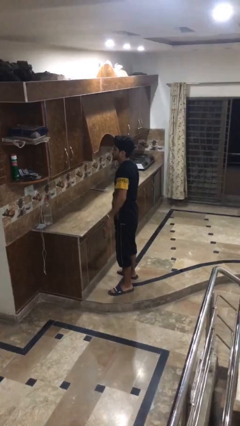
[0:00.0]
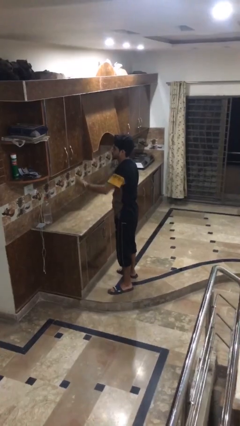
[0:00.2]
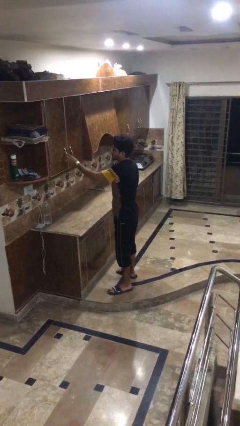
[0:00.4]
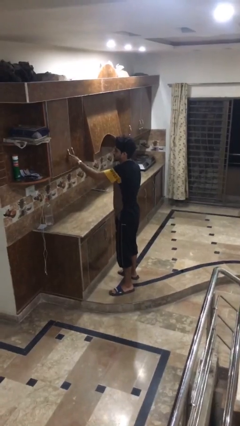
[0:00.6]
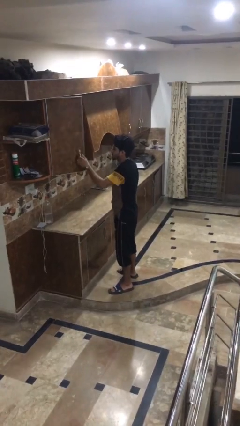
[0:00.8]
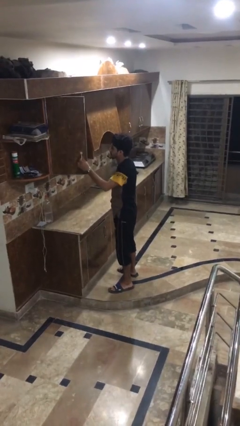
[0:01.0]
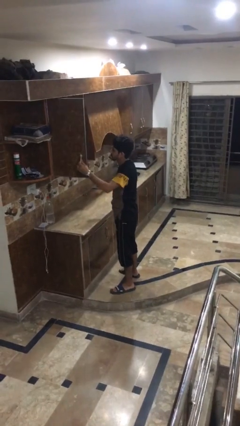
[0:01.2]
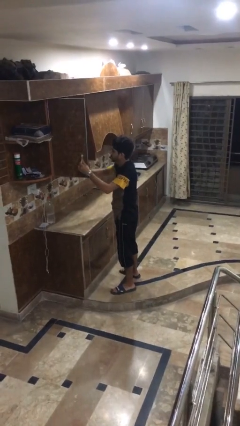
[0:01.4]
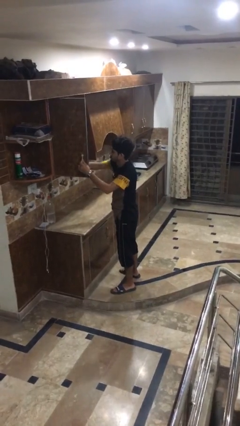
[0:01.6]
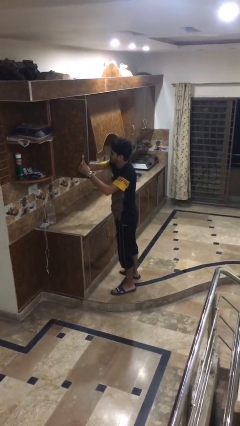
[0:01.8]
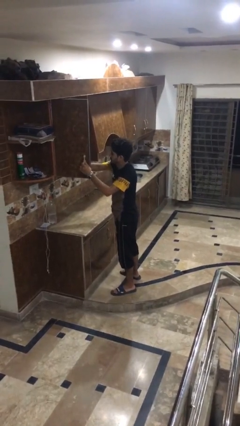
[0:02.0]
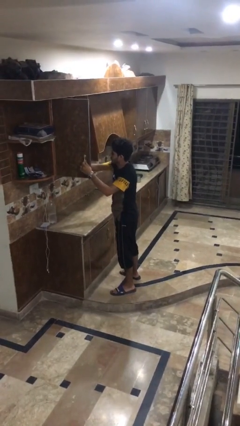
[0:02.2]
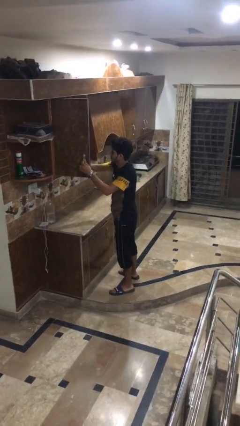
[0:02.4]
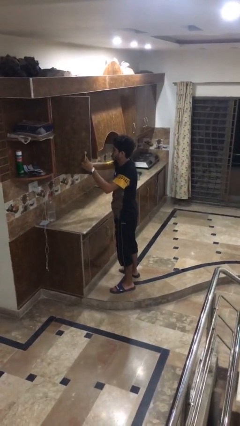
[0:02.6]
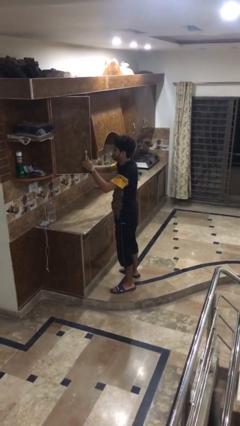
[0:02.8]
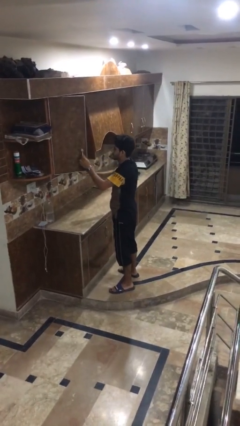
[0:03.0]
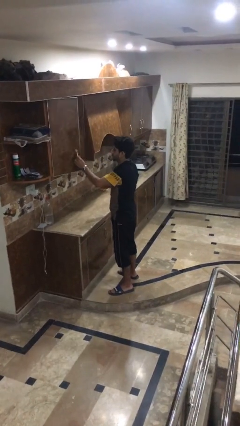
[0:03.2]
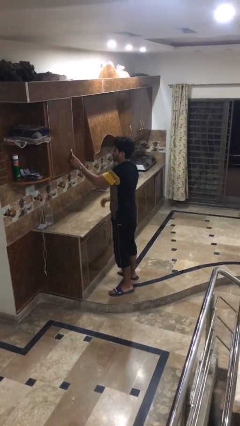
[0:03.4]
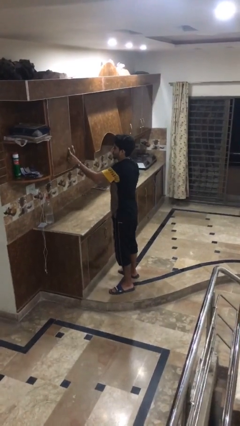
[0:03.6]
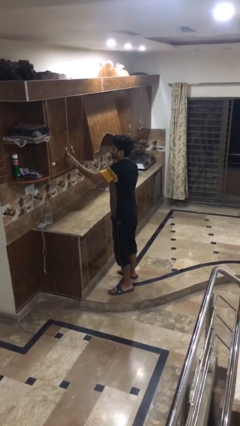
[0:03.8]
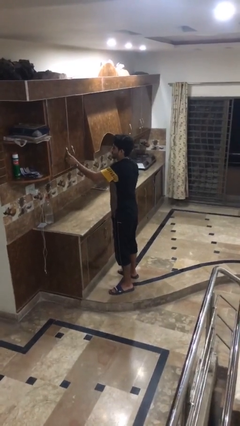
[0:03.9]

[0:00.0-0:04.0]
person searches in cabinet

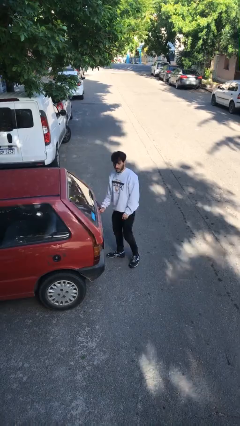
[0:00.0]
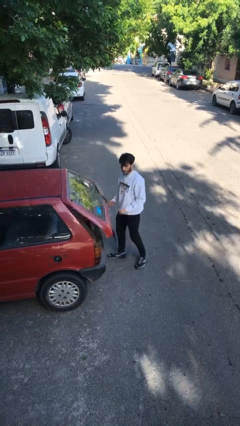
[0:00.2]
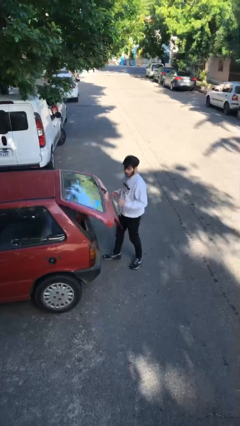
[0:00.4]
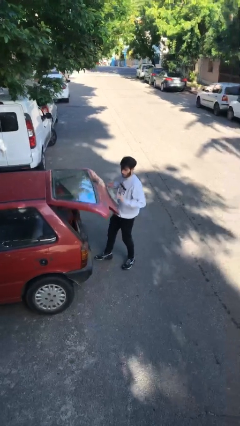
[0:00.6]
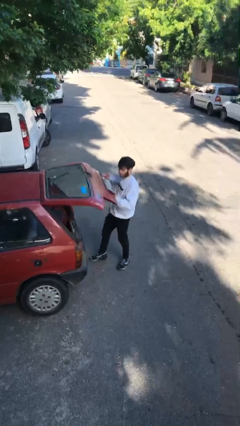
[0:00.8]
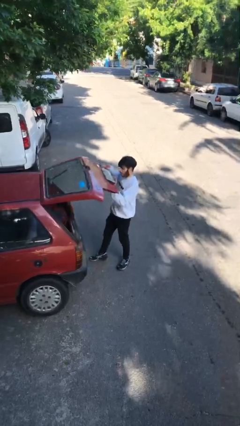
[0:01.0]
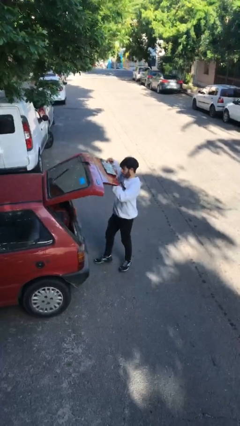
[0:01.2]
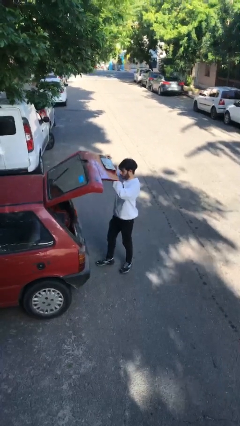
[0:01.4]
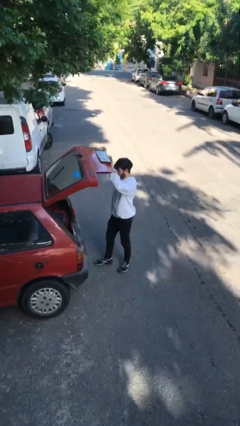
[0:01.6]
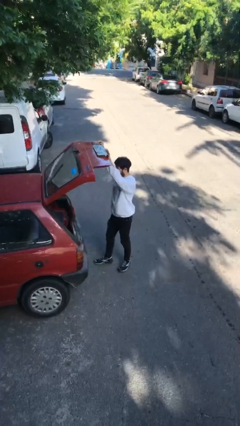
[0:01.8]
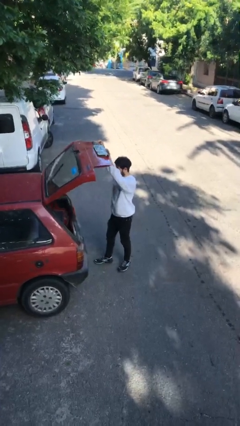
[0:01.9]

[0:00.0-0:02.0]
person opens car trunk

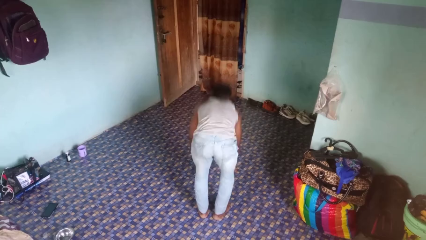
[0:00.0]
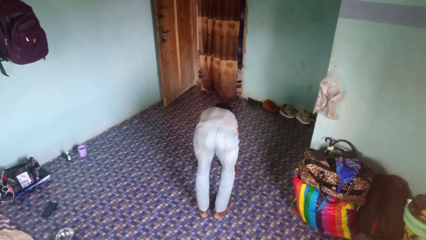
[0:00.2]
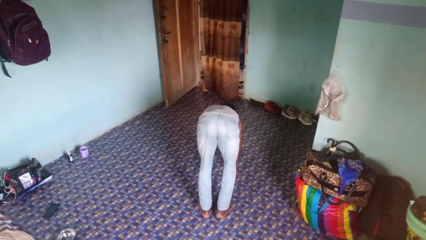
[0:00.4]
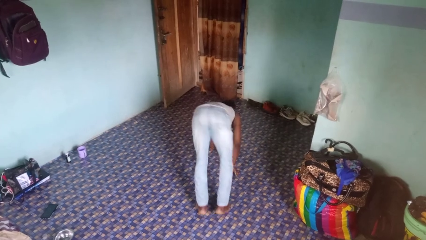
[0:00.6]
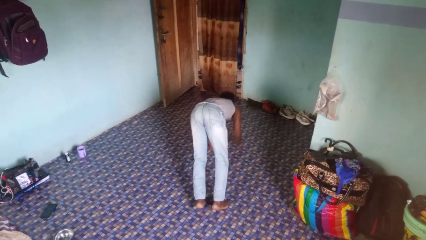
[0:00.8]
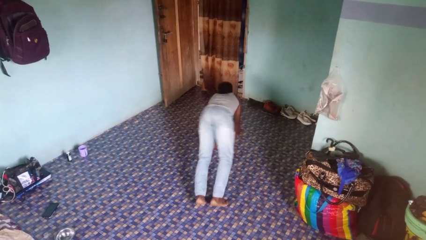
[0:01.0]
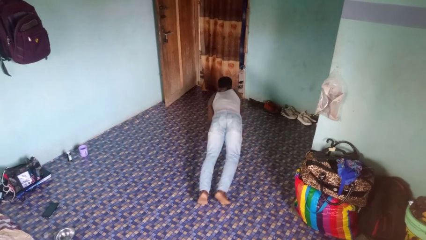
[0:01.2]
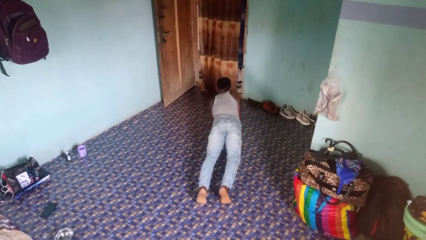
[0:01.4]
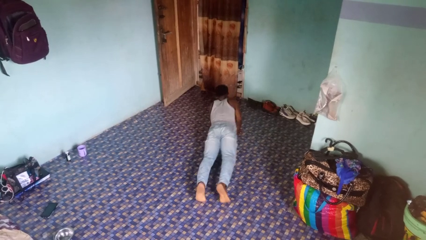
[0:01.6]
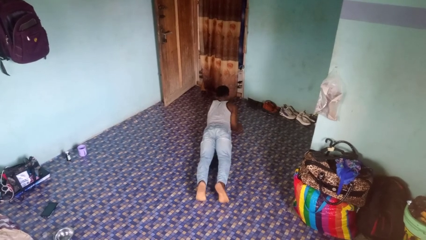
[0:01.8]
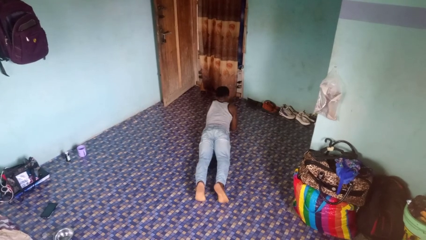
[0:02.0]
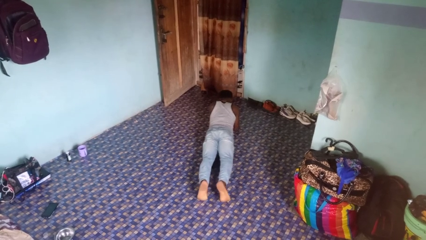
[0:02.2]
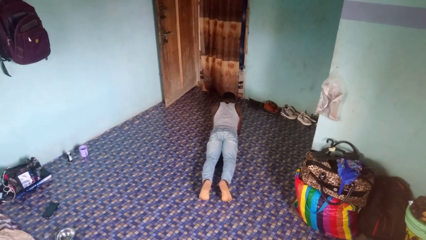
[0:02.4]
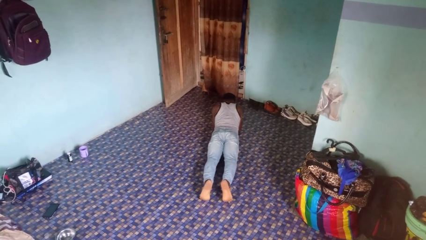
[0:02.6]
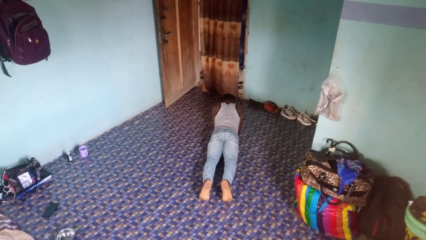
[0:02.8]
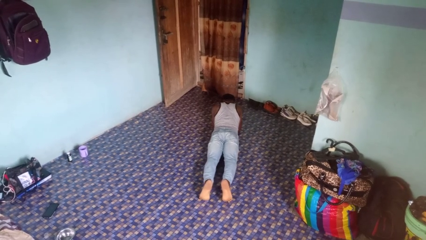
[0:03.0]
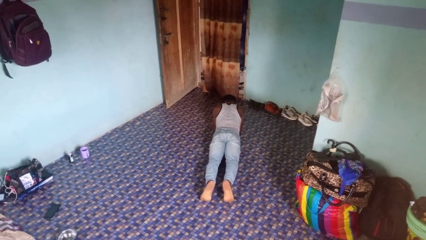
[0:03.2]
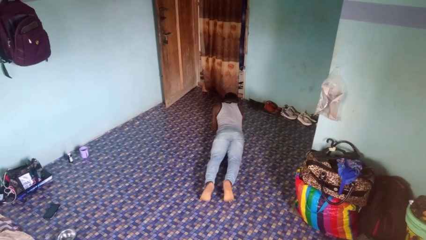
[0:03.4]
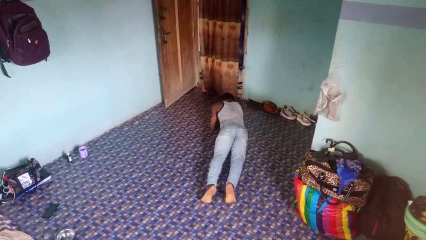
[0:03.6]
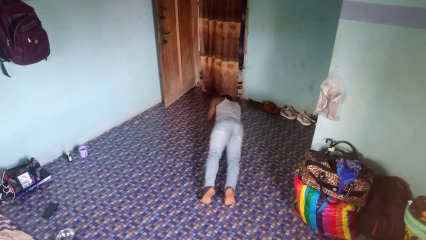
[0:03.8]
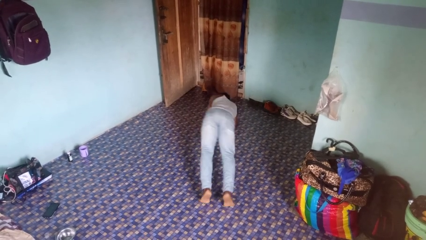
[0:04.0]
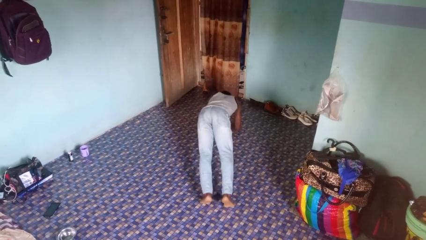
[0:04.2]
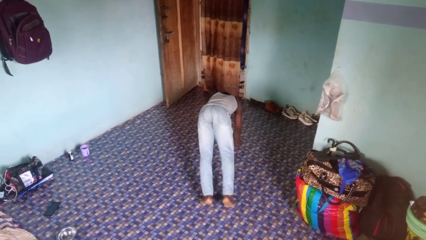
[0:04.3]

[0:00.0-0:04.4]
person exercises with plank

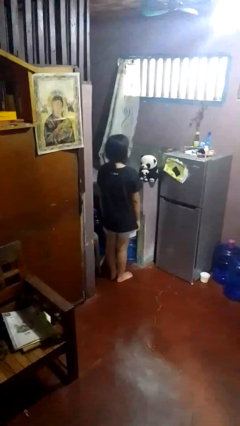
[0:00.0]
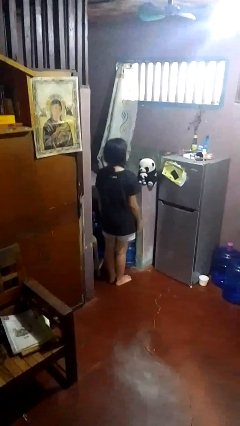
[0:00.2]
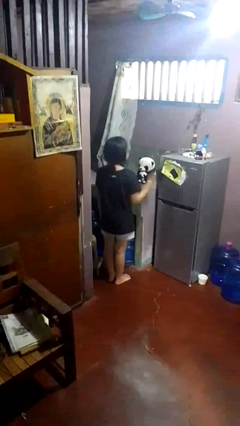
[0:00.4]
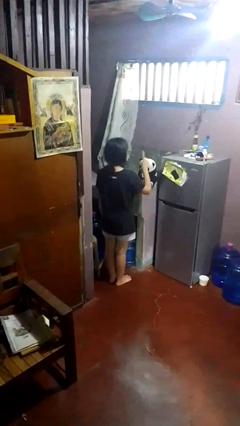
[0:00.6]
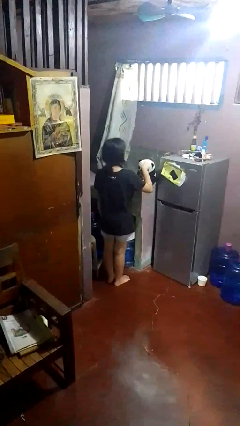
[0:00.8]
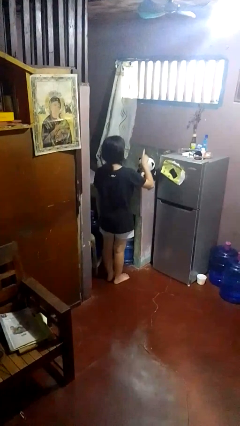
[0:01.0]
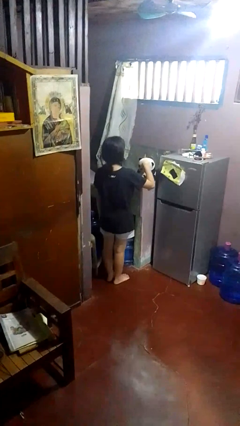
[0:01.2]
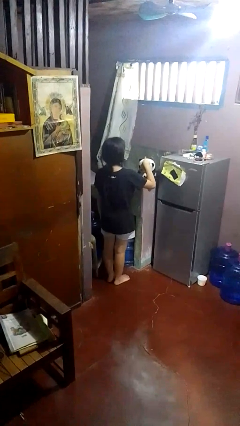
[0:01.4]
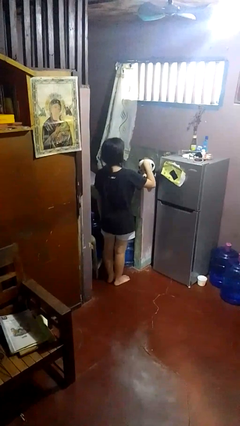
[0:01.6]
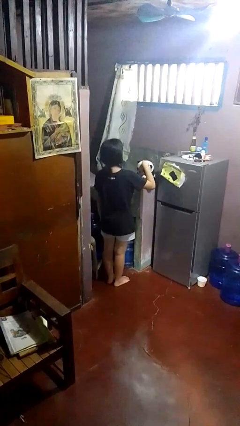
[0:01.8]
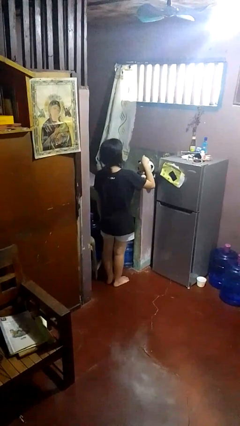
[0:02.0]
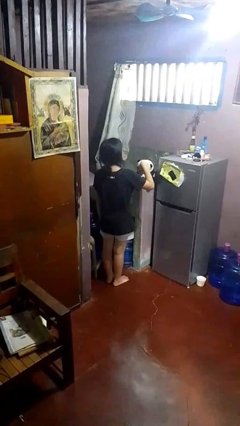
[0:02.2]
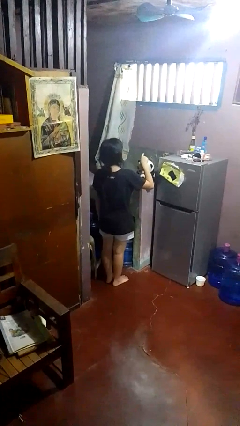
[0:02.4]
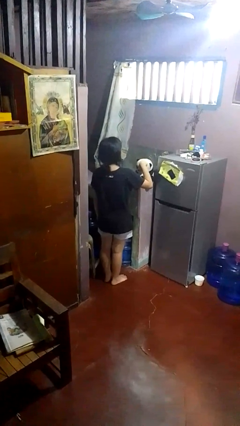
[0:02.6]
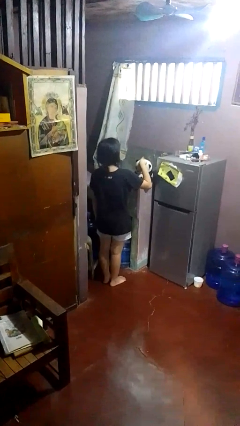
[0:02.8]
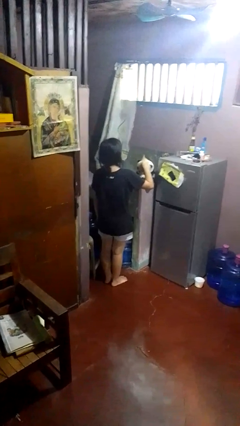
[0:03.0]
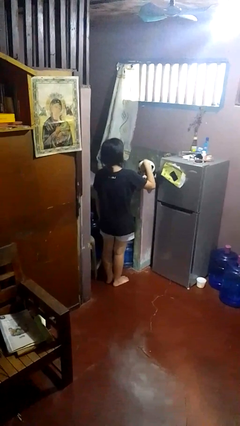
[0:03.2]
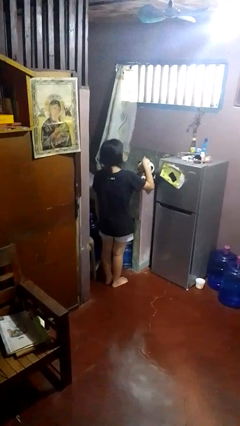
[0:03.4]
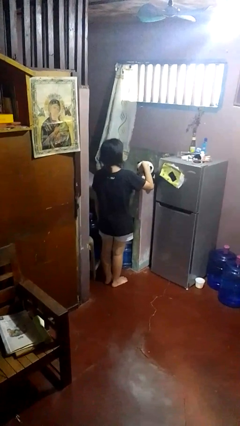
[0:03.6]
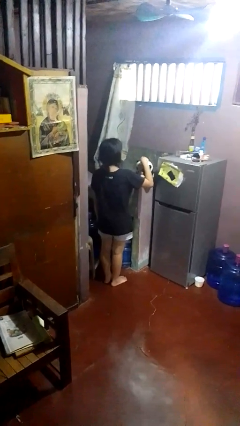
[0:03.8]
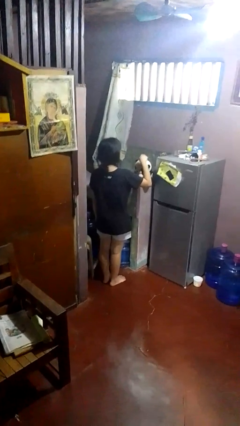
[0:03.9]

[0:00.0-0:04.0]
person taps object with finger

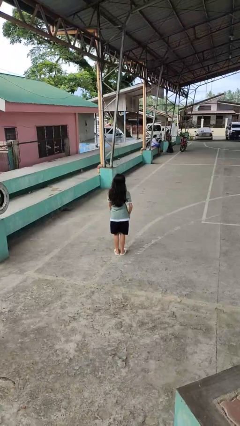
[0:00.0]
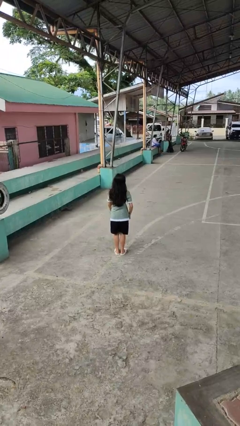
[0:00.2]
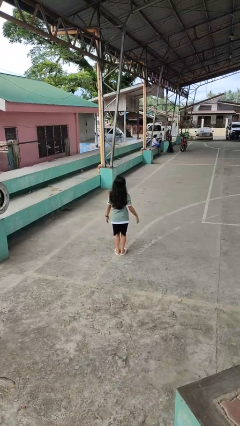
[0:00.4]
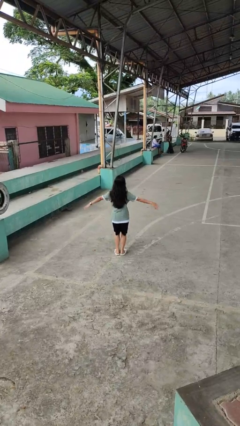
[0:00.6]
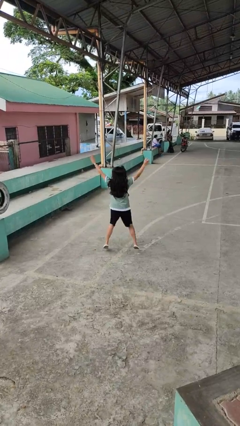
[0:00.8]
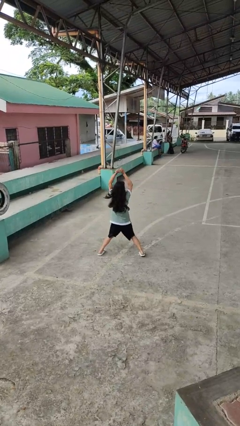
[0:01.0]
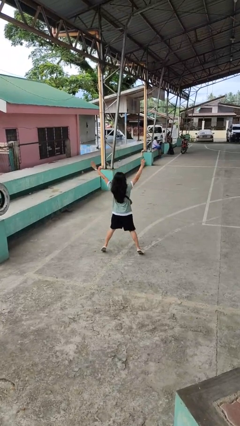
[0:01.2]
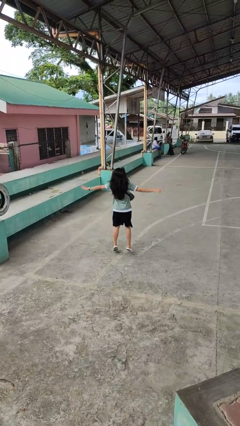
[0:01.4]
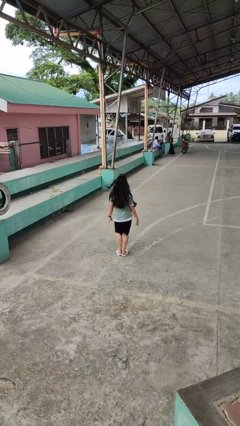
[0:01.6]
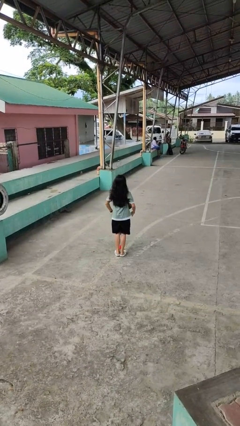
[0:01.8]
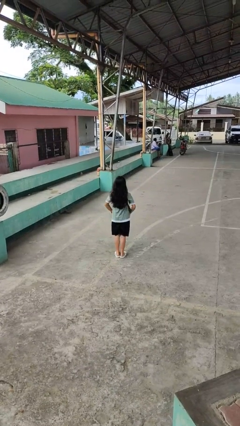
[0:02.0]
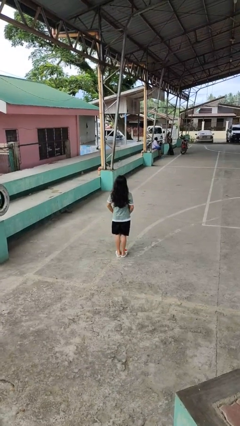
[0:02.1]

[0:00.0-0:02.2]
person exercises with jumping jacks

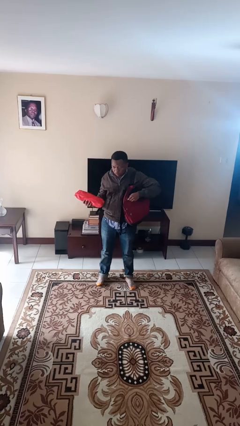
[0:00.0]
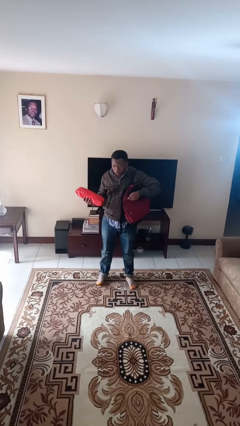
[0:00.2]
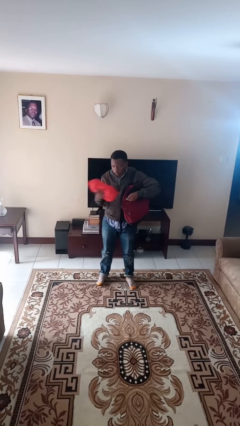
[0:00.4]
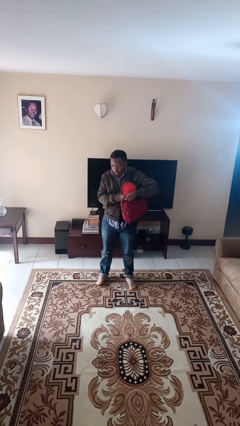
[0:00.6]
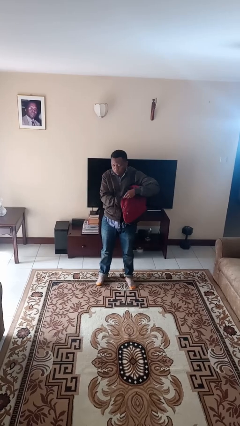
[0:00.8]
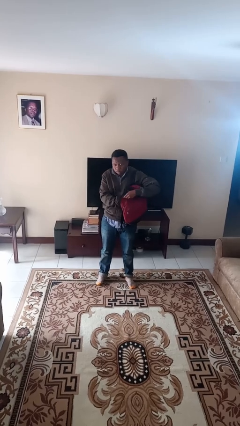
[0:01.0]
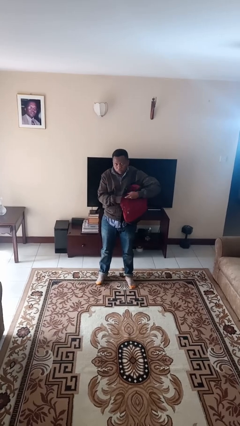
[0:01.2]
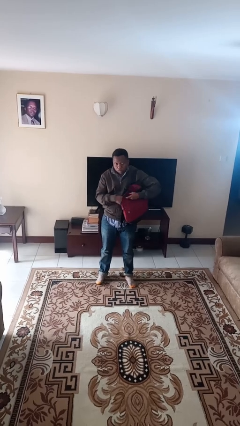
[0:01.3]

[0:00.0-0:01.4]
person puts object into backpack
